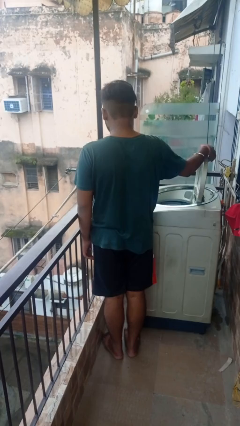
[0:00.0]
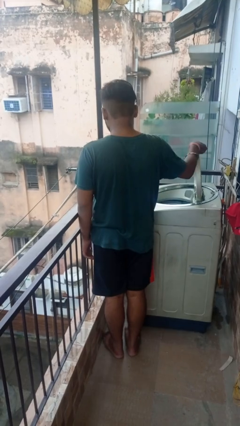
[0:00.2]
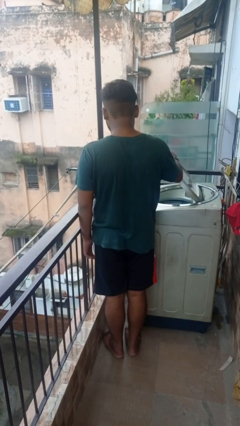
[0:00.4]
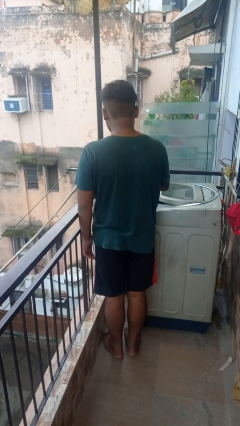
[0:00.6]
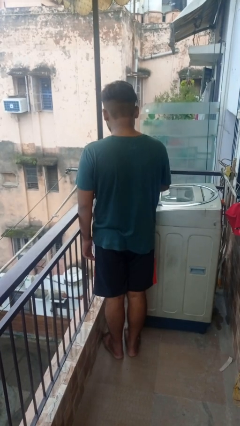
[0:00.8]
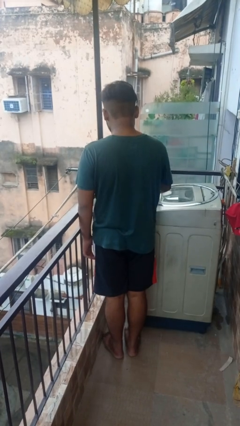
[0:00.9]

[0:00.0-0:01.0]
person closes clothes washer

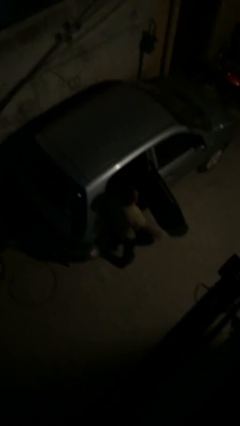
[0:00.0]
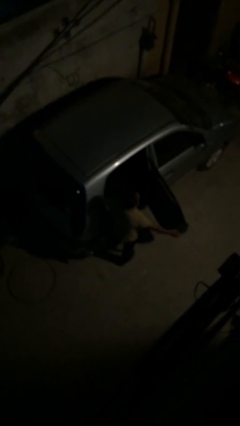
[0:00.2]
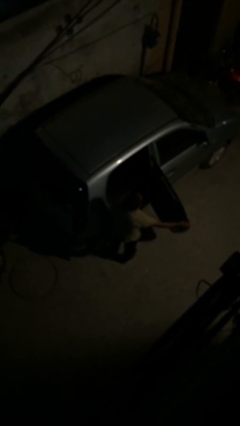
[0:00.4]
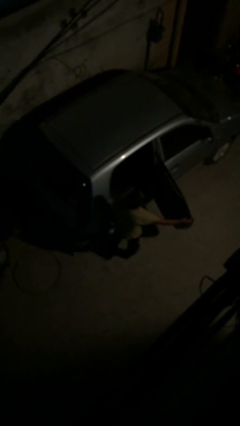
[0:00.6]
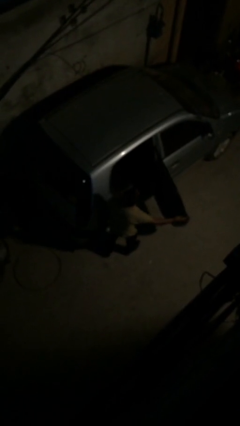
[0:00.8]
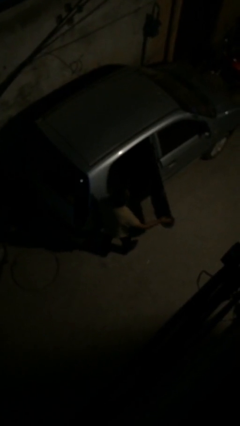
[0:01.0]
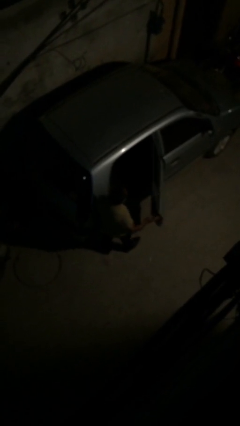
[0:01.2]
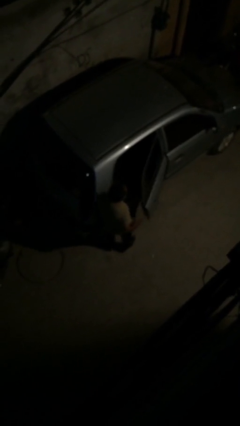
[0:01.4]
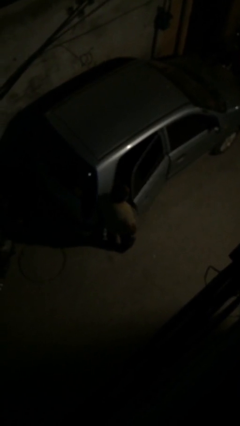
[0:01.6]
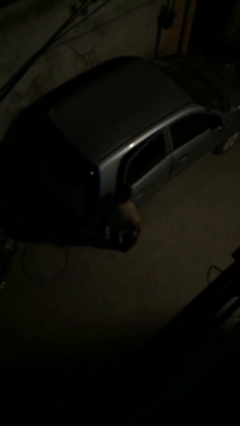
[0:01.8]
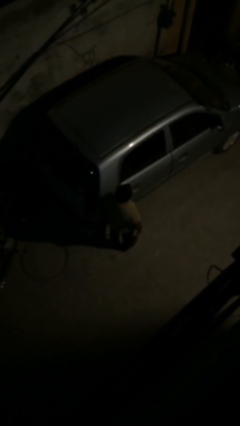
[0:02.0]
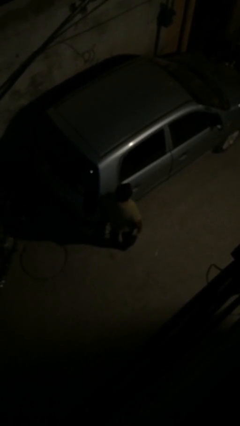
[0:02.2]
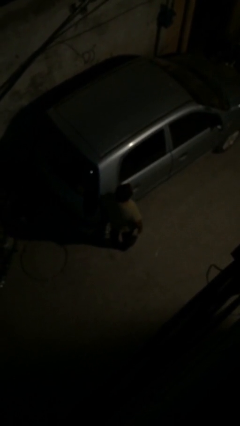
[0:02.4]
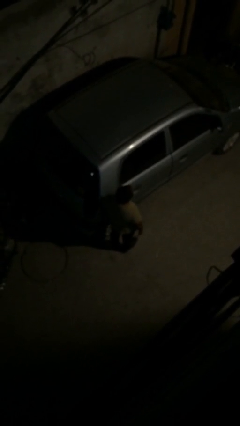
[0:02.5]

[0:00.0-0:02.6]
person closes car door

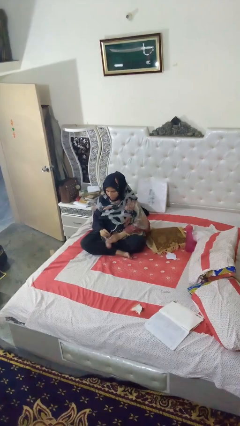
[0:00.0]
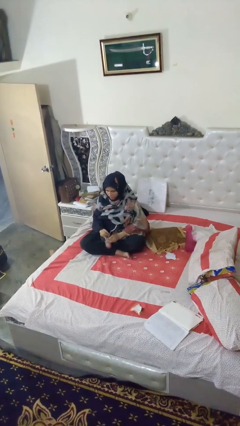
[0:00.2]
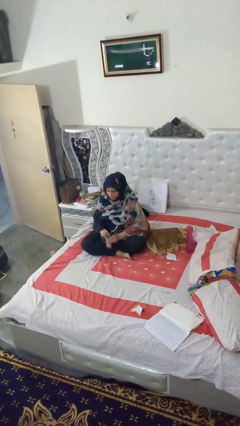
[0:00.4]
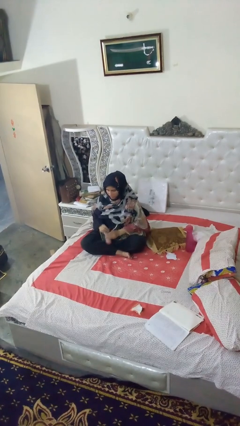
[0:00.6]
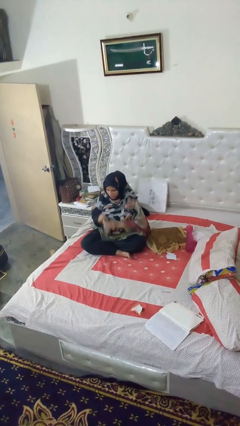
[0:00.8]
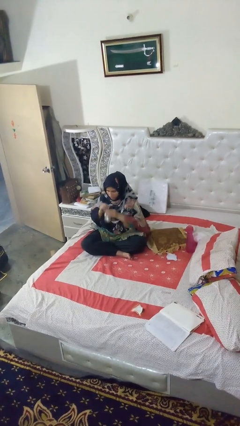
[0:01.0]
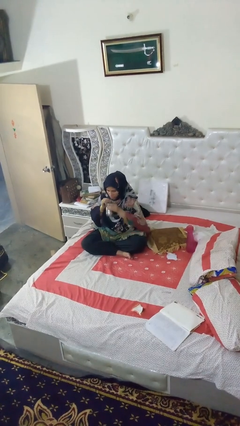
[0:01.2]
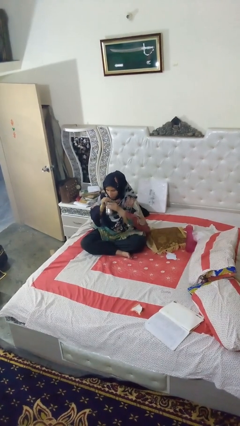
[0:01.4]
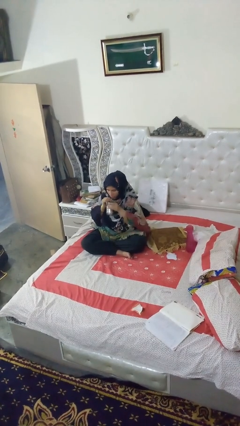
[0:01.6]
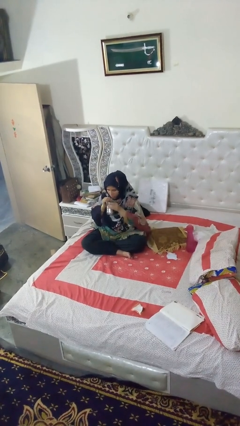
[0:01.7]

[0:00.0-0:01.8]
person drinks from straw

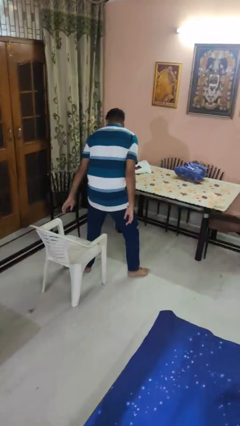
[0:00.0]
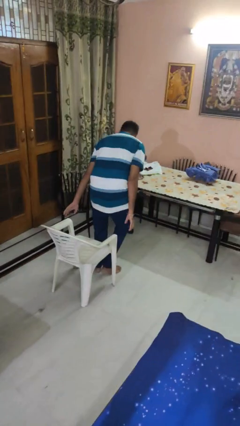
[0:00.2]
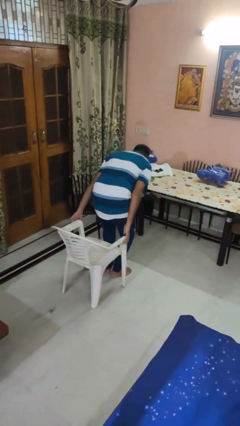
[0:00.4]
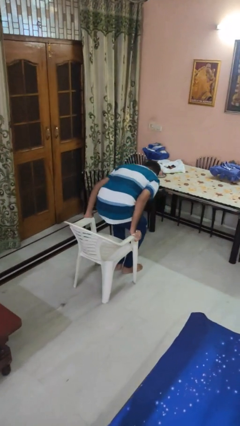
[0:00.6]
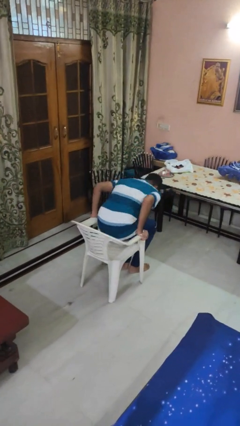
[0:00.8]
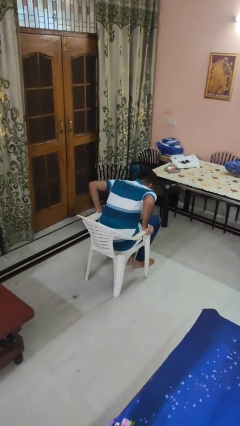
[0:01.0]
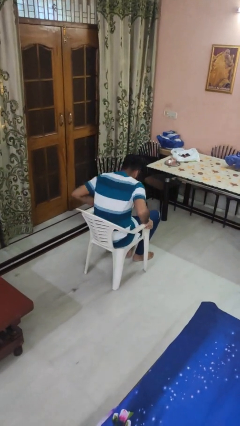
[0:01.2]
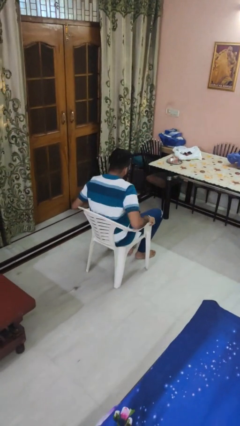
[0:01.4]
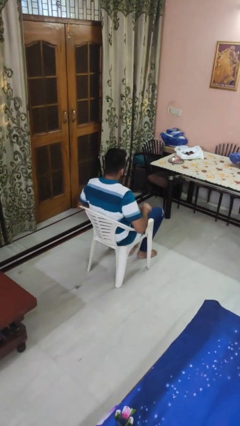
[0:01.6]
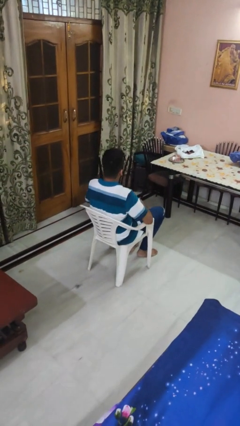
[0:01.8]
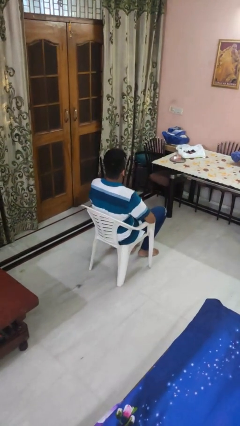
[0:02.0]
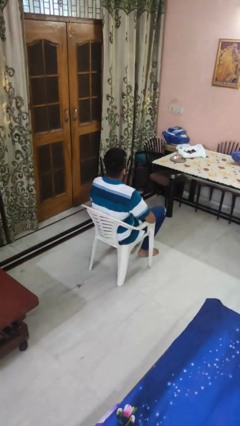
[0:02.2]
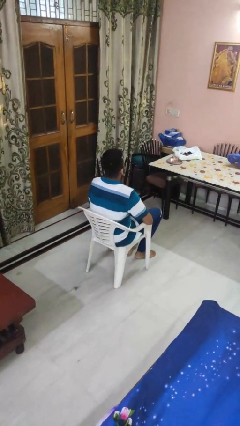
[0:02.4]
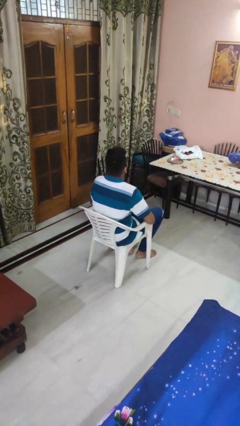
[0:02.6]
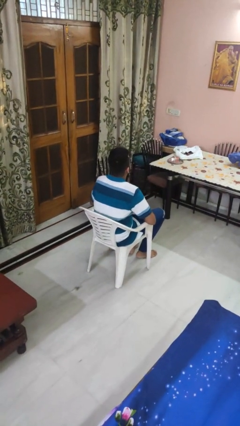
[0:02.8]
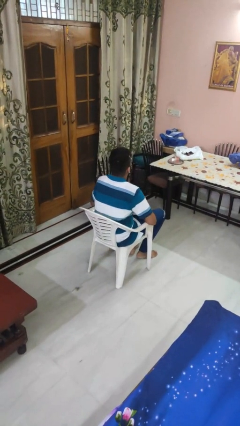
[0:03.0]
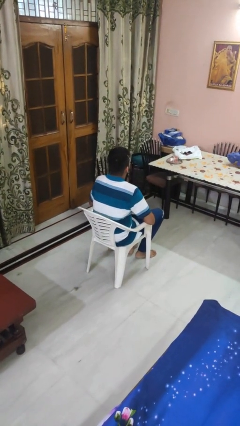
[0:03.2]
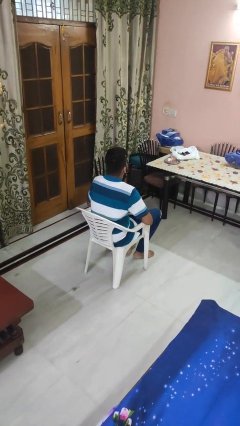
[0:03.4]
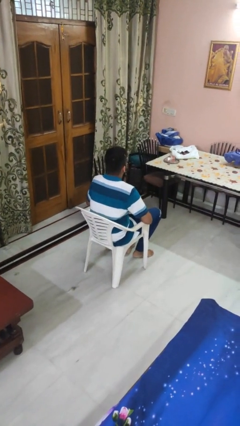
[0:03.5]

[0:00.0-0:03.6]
person sits down

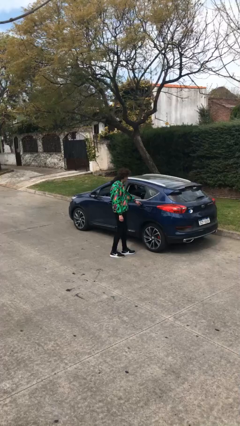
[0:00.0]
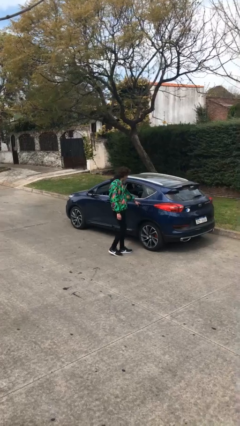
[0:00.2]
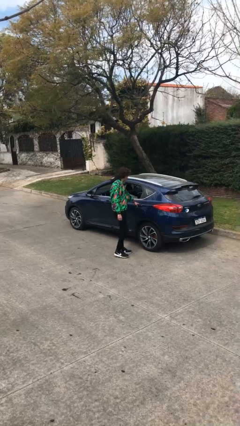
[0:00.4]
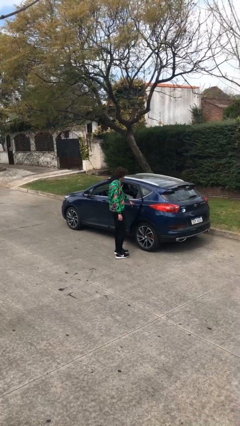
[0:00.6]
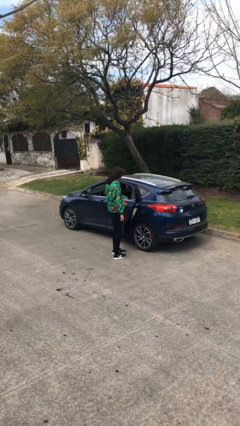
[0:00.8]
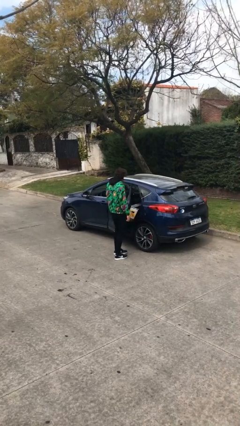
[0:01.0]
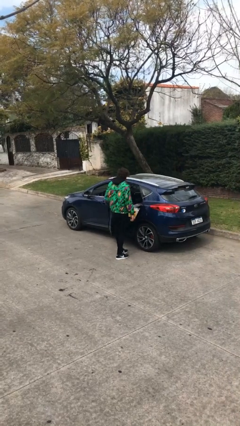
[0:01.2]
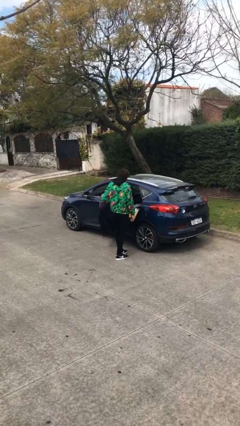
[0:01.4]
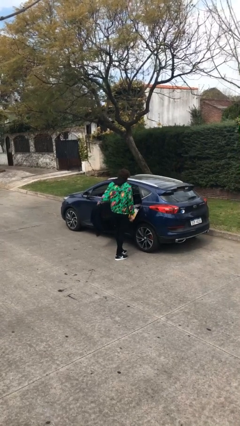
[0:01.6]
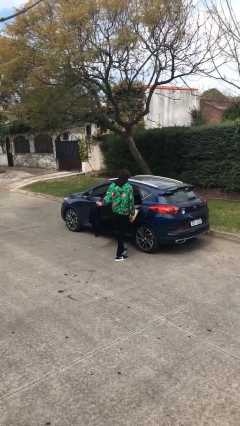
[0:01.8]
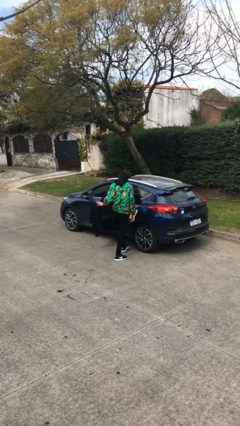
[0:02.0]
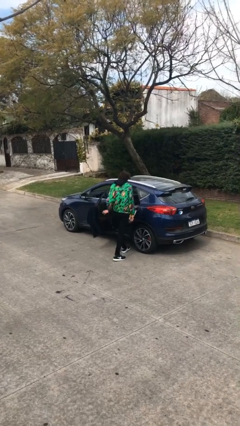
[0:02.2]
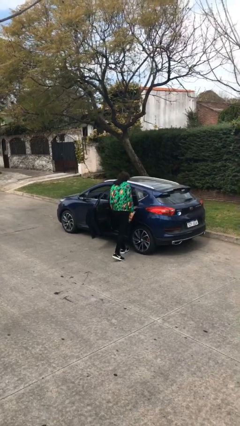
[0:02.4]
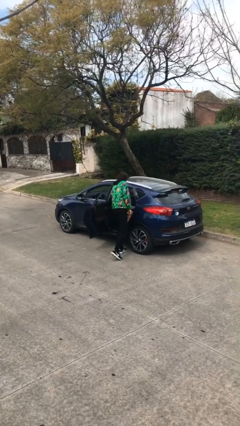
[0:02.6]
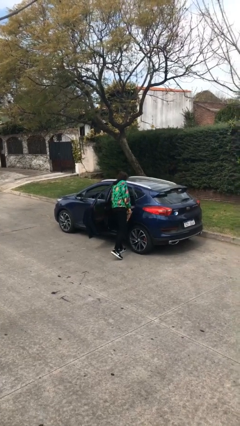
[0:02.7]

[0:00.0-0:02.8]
person opens car door

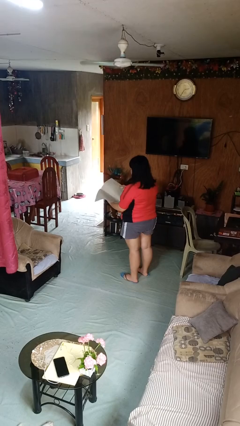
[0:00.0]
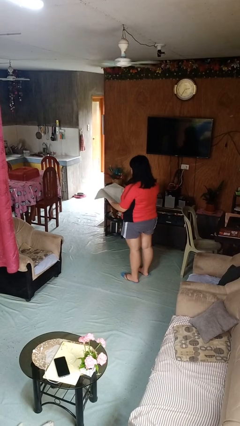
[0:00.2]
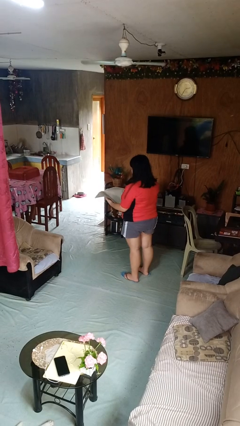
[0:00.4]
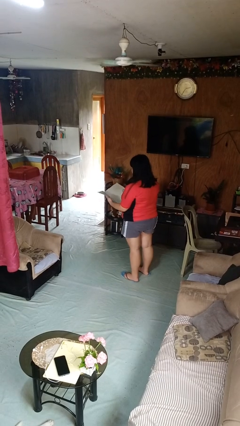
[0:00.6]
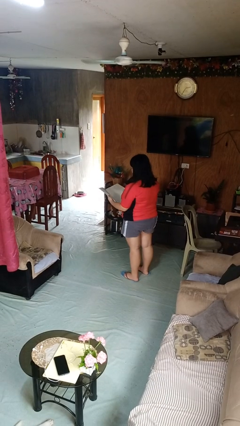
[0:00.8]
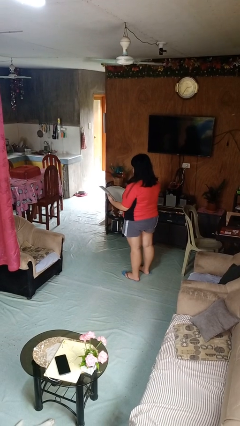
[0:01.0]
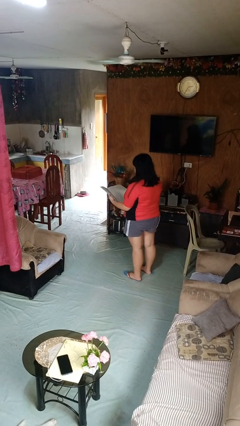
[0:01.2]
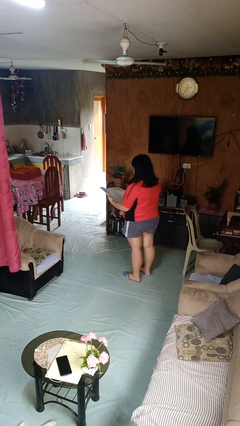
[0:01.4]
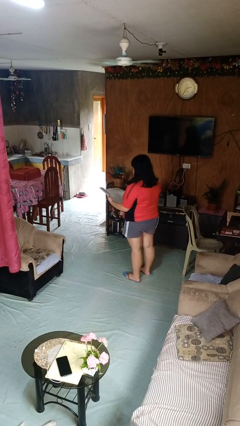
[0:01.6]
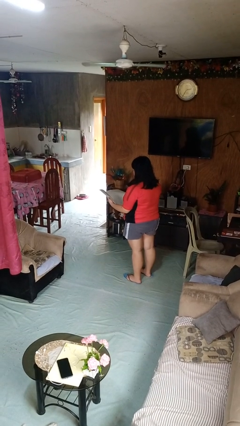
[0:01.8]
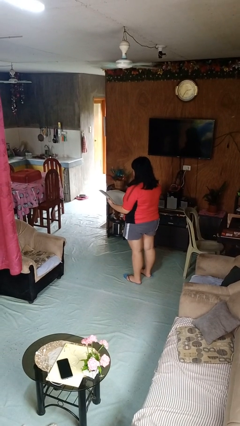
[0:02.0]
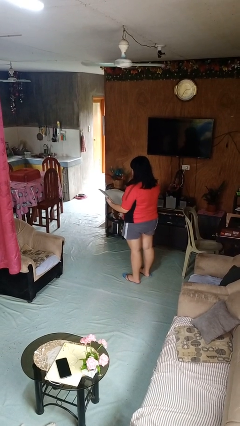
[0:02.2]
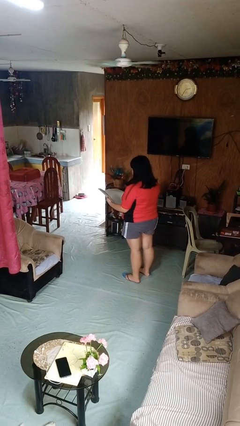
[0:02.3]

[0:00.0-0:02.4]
person reads newspaper

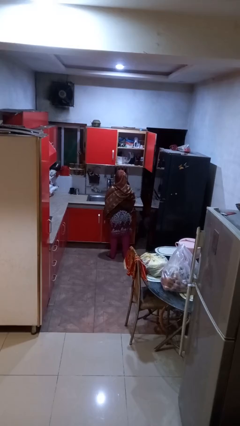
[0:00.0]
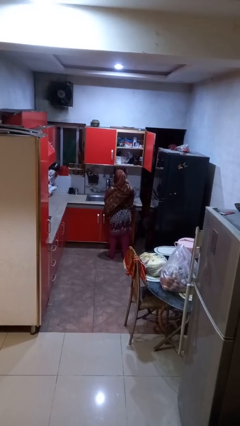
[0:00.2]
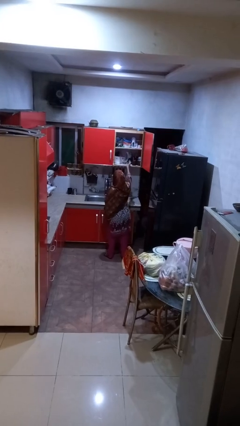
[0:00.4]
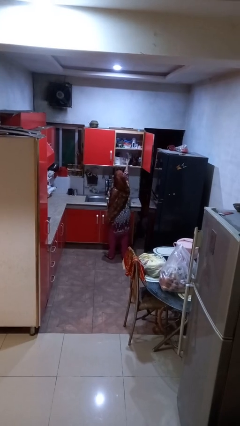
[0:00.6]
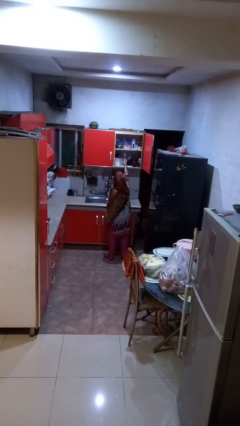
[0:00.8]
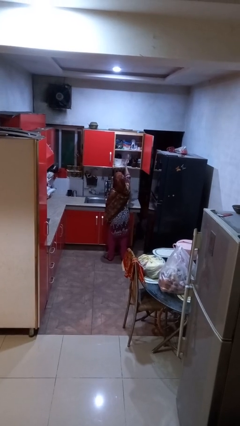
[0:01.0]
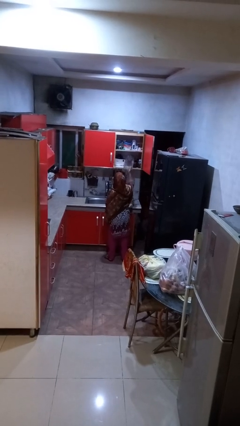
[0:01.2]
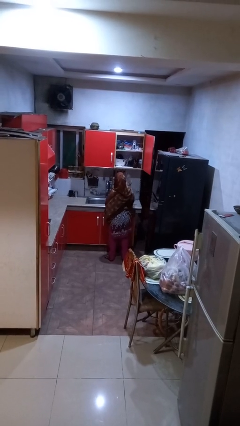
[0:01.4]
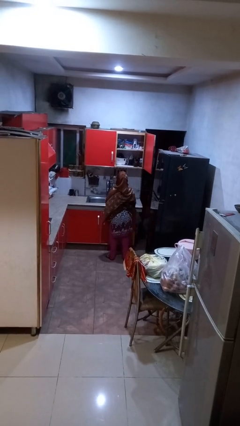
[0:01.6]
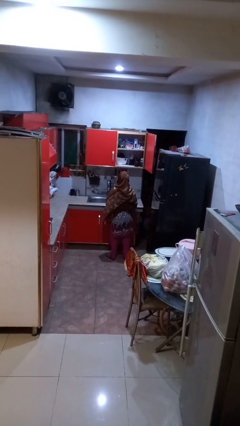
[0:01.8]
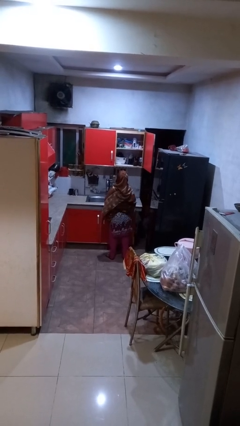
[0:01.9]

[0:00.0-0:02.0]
person takes object from cabinet

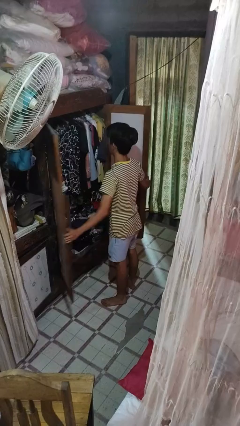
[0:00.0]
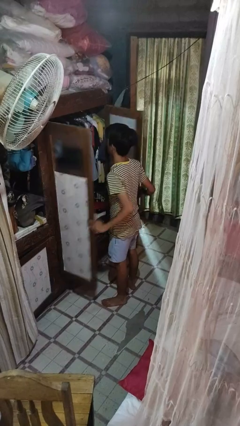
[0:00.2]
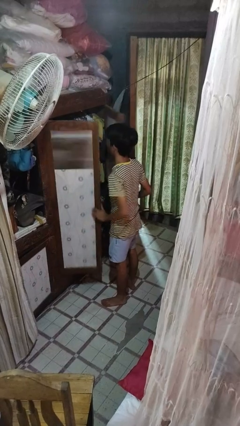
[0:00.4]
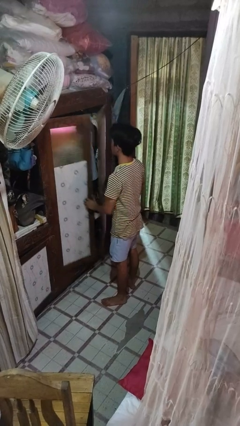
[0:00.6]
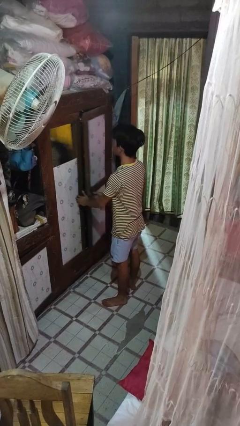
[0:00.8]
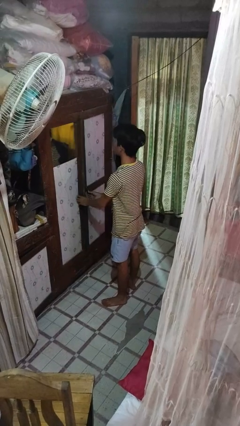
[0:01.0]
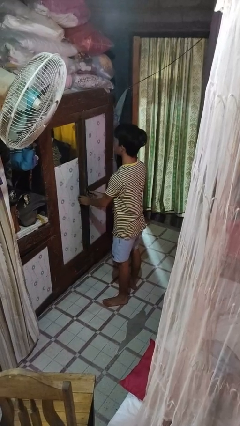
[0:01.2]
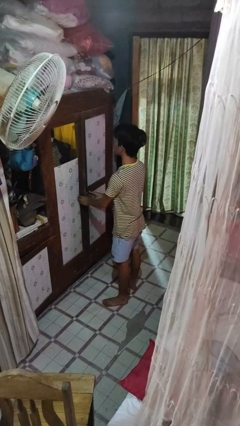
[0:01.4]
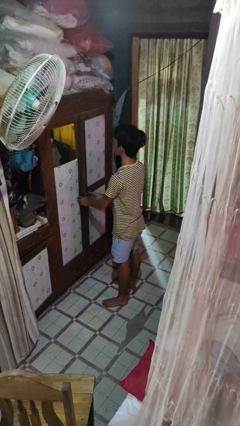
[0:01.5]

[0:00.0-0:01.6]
person closes closet door
